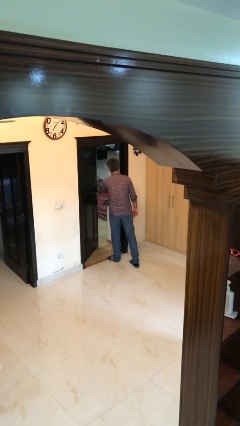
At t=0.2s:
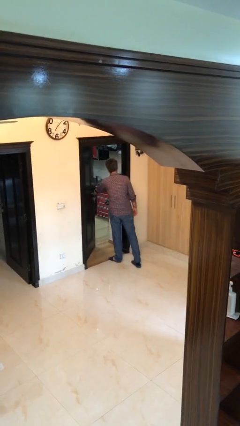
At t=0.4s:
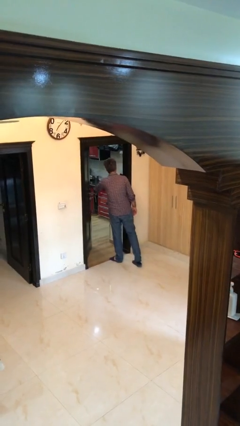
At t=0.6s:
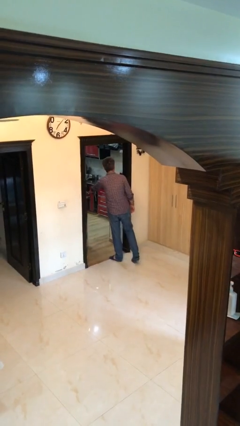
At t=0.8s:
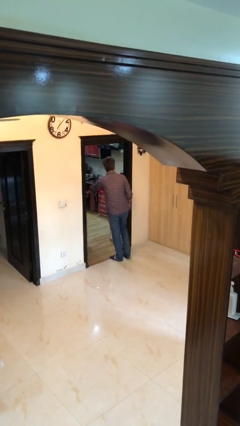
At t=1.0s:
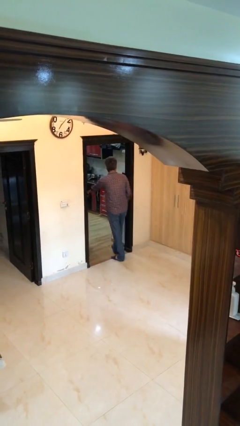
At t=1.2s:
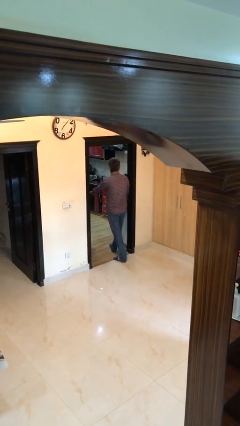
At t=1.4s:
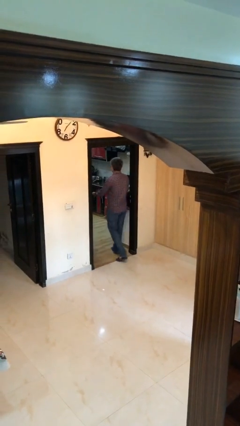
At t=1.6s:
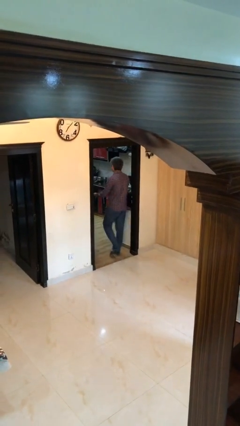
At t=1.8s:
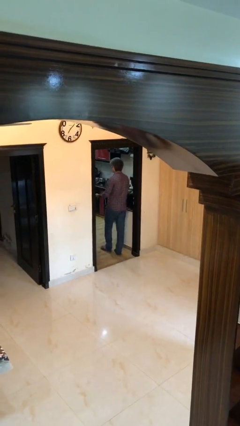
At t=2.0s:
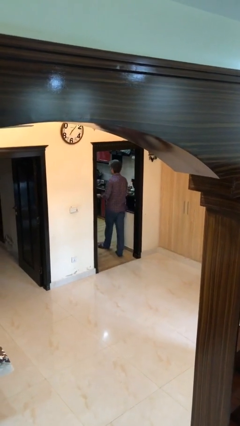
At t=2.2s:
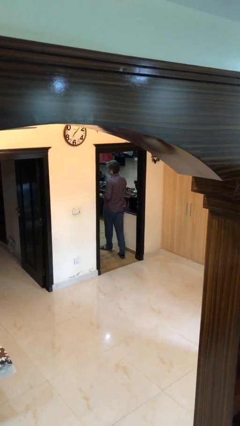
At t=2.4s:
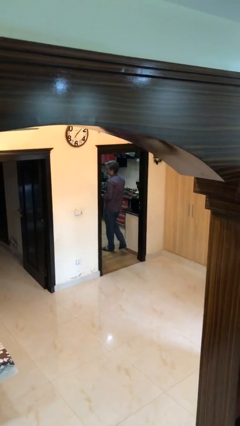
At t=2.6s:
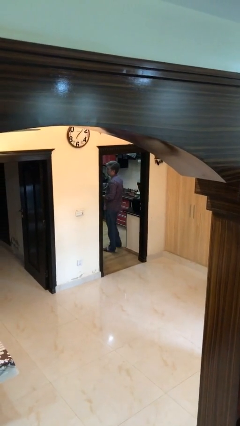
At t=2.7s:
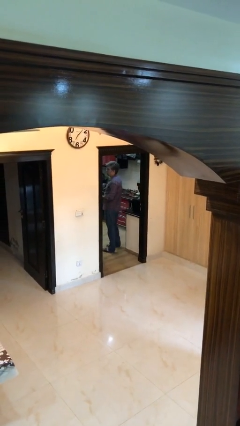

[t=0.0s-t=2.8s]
person exits scene through structure

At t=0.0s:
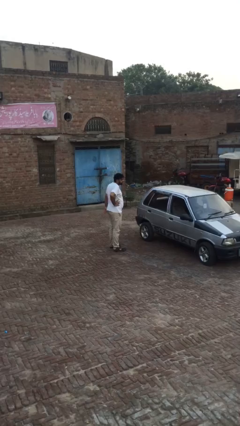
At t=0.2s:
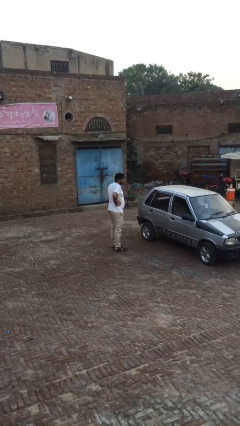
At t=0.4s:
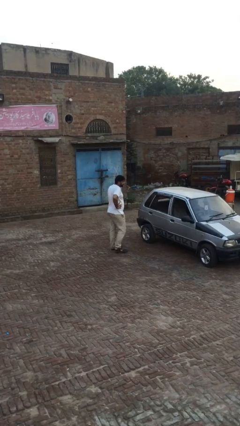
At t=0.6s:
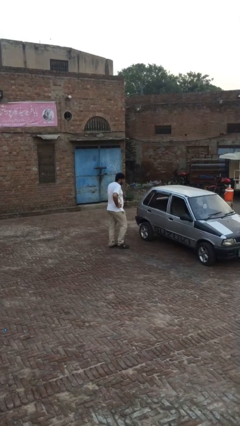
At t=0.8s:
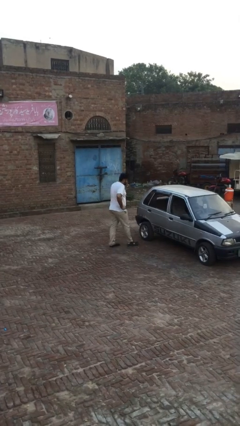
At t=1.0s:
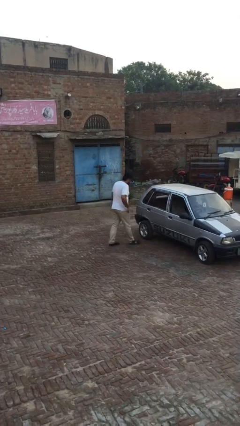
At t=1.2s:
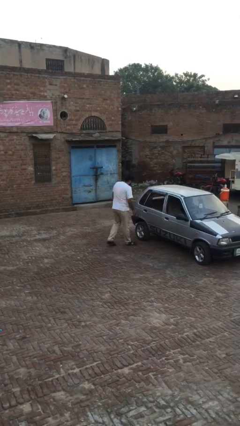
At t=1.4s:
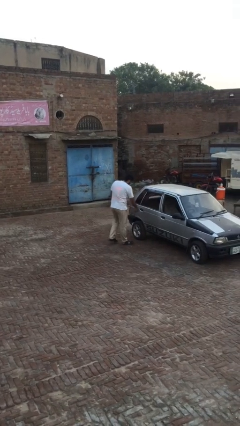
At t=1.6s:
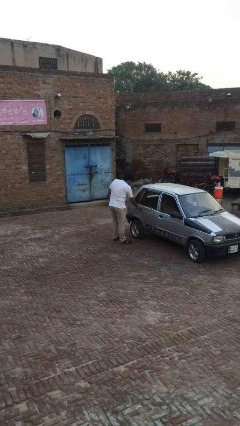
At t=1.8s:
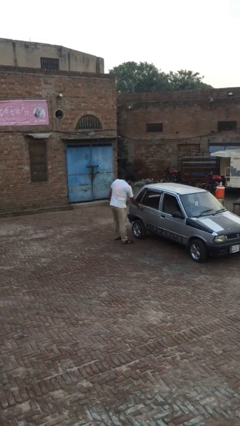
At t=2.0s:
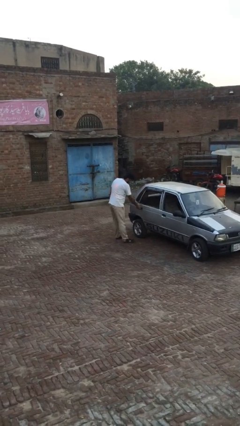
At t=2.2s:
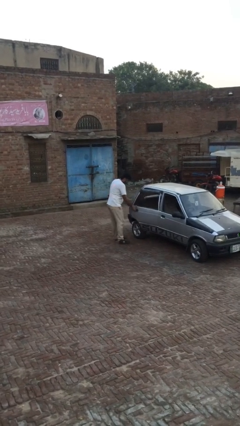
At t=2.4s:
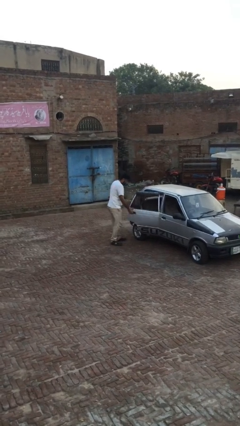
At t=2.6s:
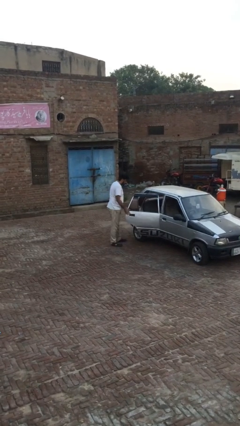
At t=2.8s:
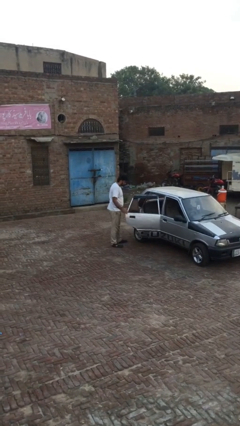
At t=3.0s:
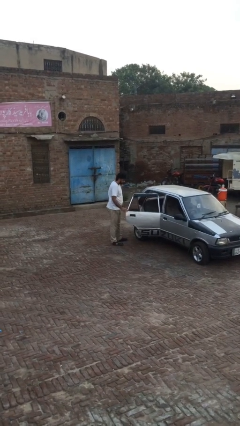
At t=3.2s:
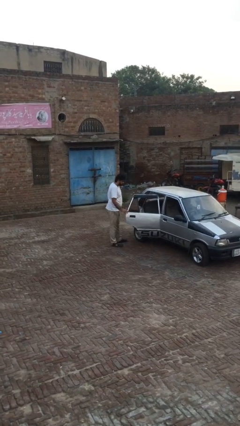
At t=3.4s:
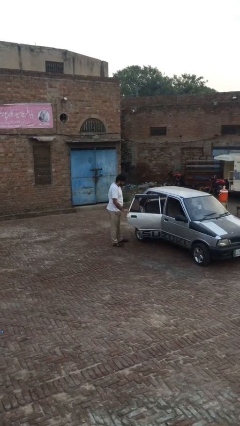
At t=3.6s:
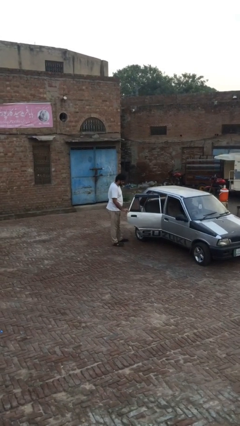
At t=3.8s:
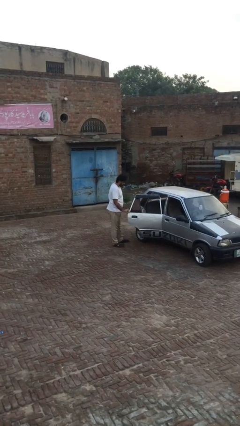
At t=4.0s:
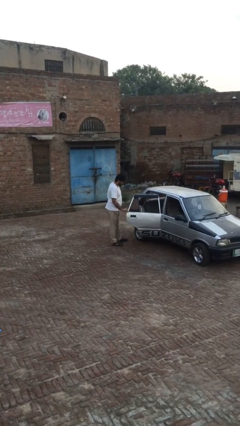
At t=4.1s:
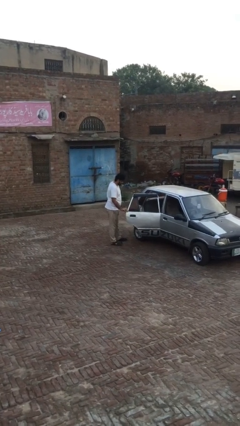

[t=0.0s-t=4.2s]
person opens car door

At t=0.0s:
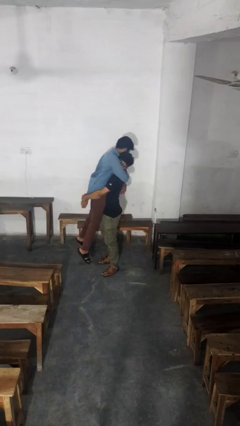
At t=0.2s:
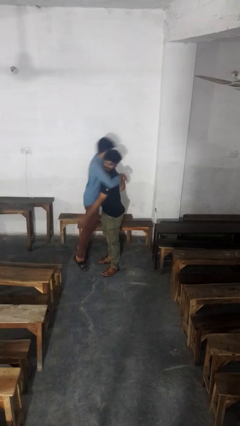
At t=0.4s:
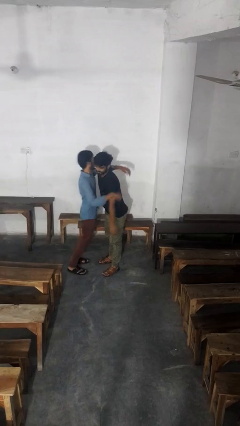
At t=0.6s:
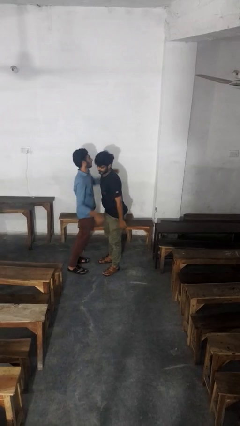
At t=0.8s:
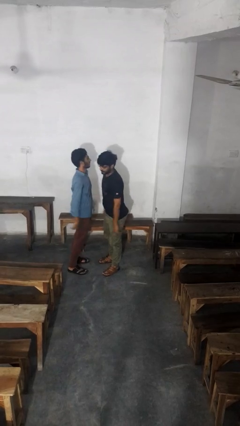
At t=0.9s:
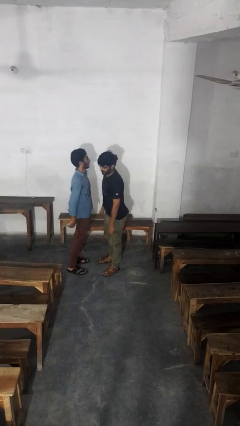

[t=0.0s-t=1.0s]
person puts down person

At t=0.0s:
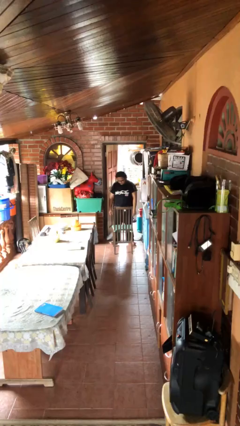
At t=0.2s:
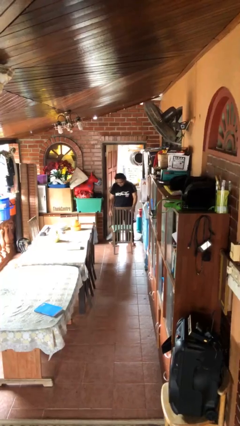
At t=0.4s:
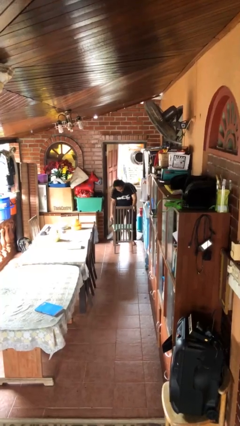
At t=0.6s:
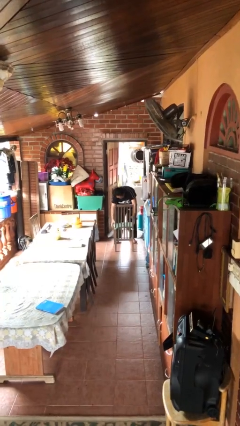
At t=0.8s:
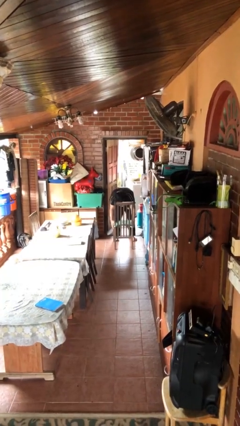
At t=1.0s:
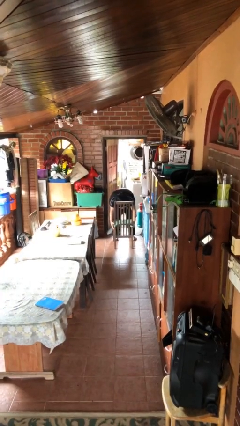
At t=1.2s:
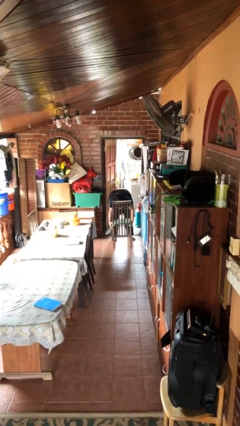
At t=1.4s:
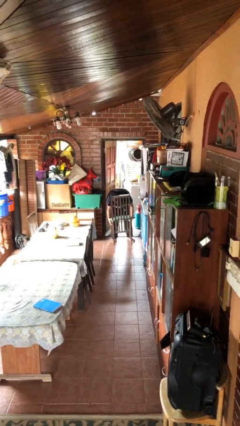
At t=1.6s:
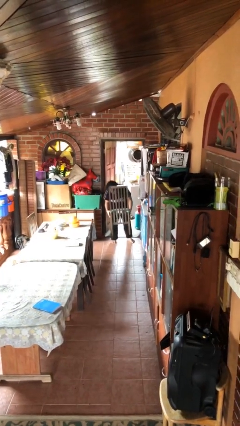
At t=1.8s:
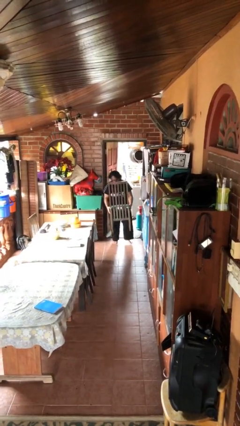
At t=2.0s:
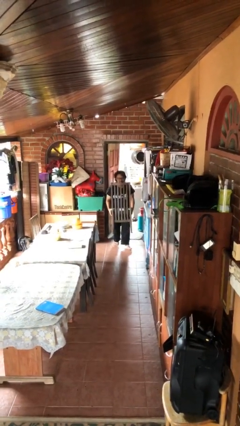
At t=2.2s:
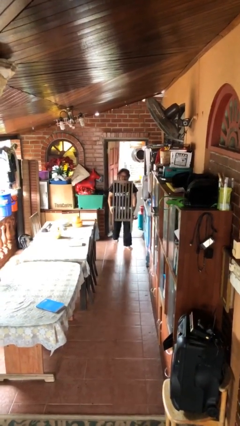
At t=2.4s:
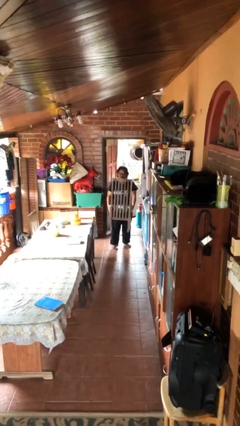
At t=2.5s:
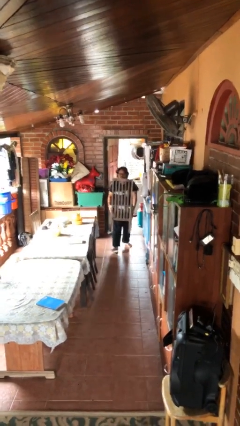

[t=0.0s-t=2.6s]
person picks up object from floor

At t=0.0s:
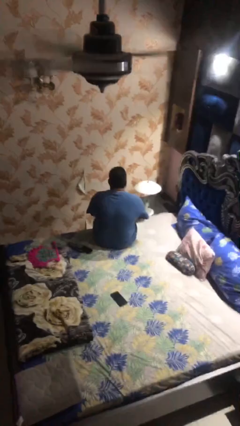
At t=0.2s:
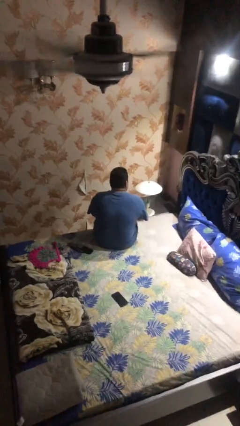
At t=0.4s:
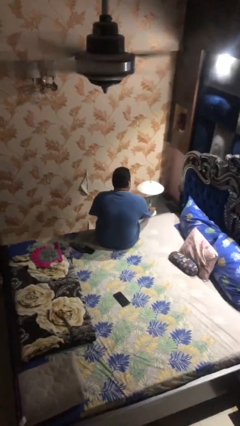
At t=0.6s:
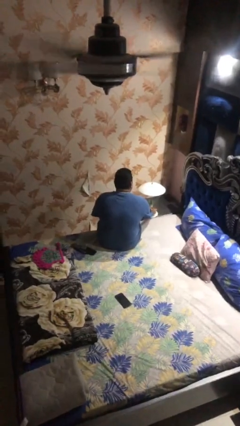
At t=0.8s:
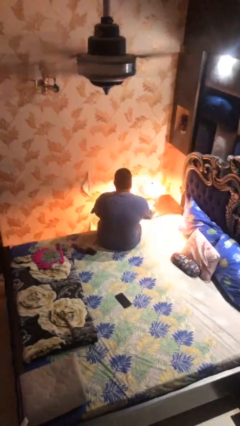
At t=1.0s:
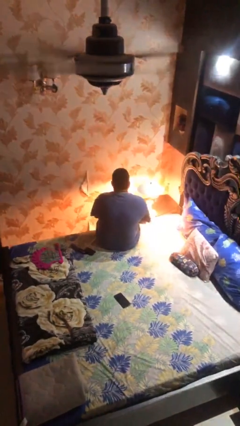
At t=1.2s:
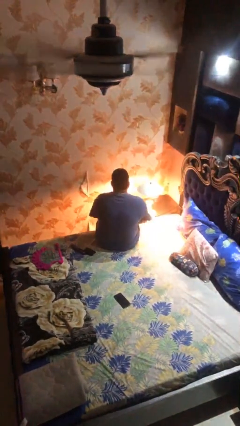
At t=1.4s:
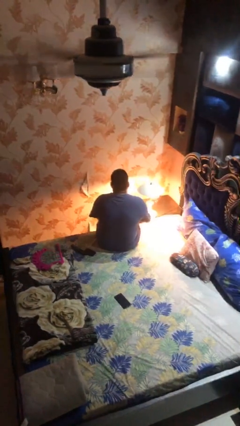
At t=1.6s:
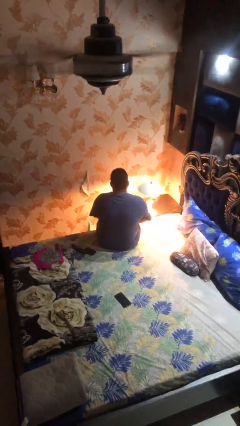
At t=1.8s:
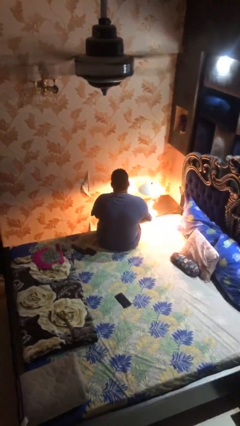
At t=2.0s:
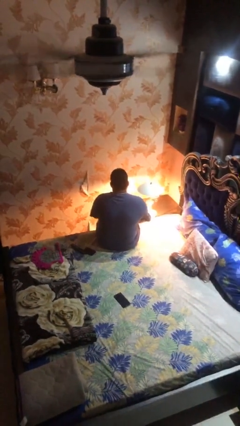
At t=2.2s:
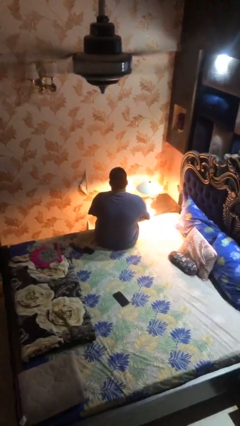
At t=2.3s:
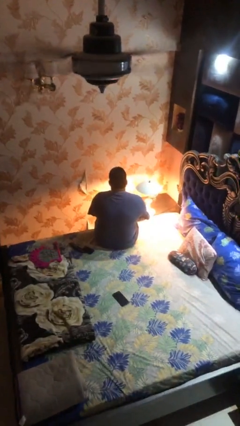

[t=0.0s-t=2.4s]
person turns on lamp

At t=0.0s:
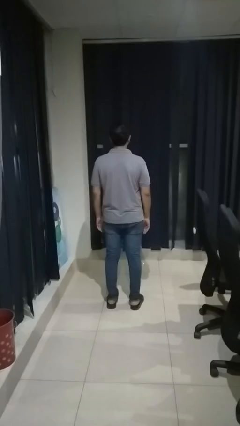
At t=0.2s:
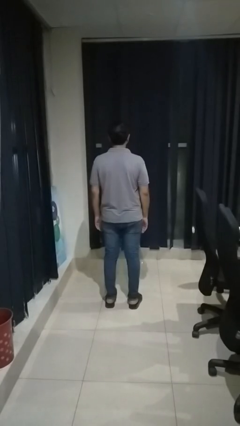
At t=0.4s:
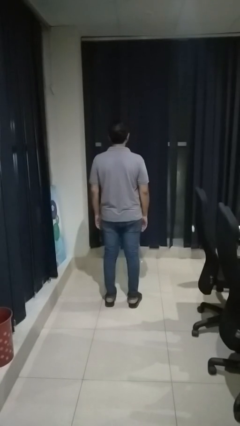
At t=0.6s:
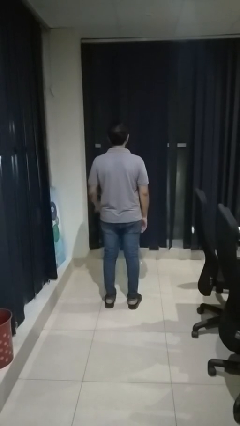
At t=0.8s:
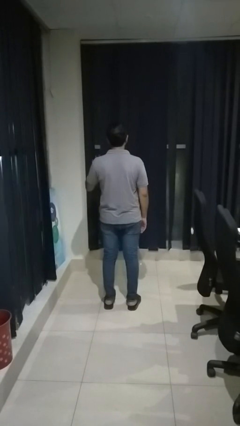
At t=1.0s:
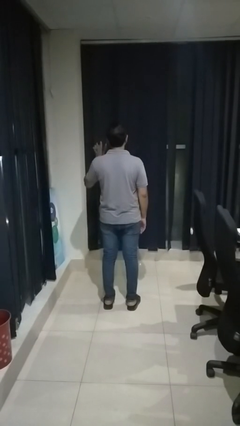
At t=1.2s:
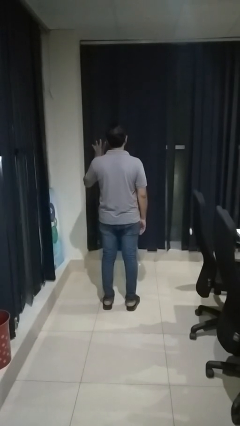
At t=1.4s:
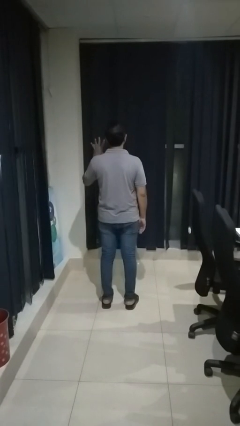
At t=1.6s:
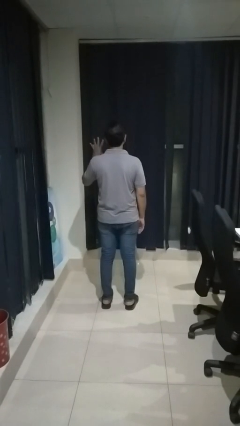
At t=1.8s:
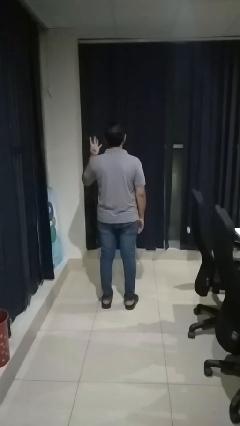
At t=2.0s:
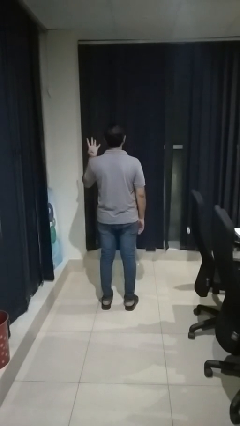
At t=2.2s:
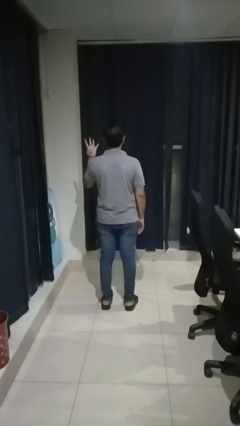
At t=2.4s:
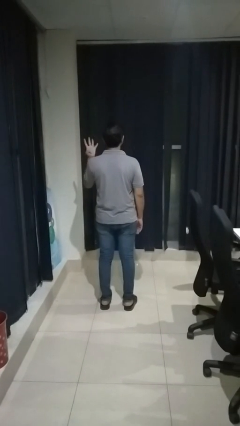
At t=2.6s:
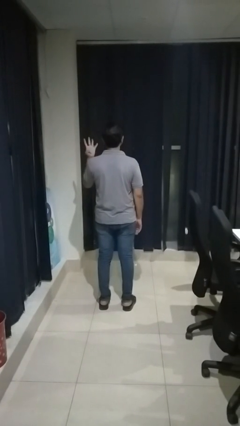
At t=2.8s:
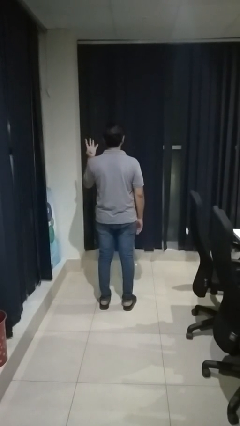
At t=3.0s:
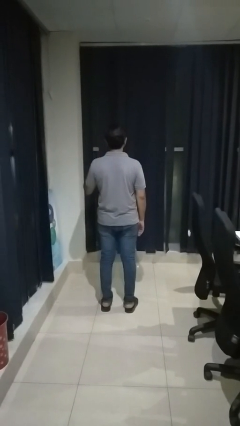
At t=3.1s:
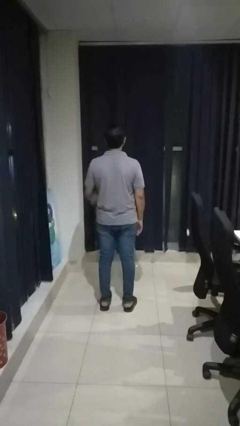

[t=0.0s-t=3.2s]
person gestures number four

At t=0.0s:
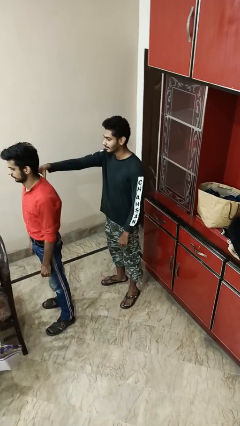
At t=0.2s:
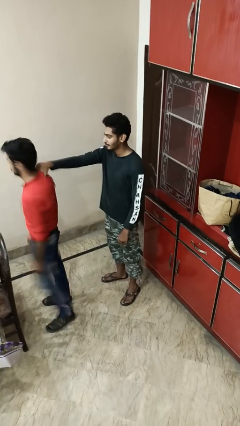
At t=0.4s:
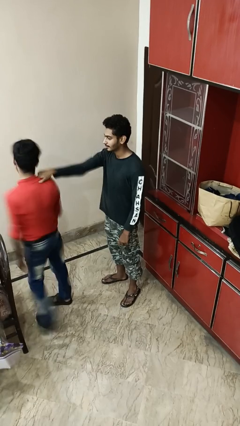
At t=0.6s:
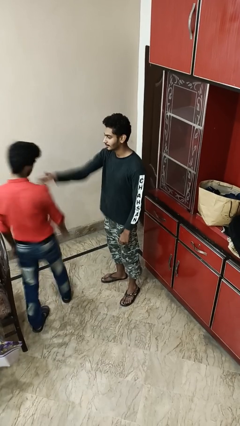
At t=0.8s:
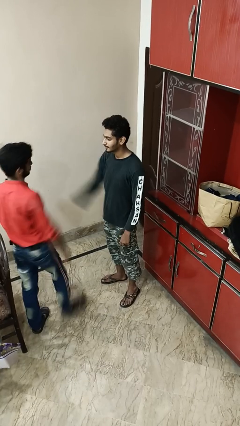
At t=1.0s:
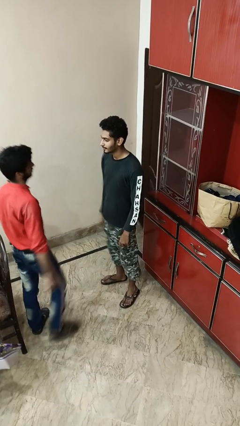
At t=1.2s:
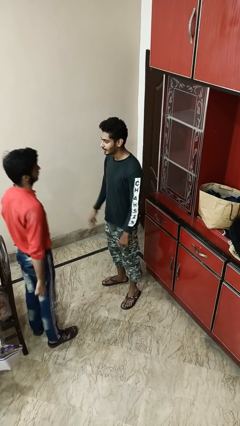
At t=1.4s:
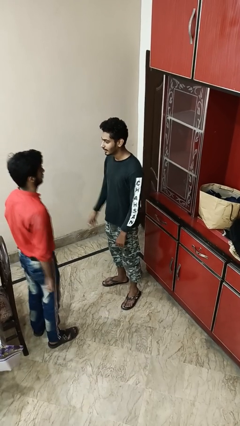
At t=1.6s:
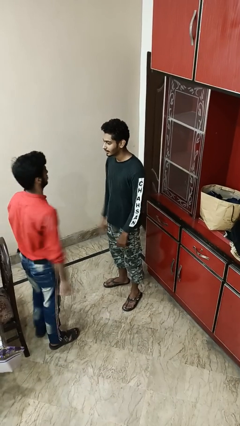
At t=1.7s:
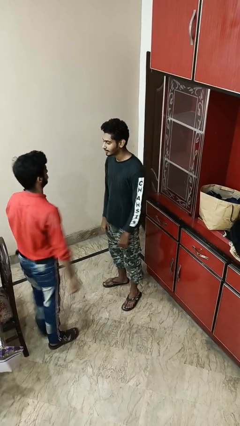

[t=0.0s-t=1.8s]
person spins person around
